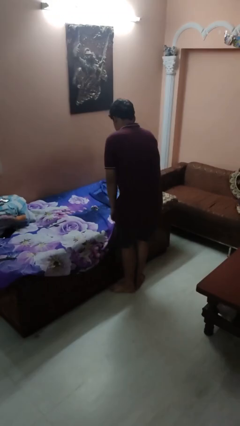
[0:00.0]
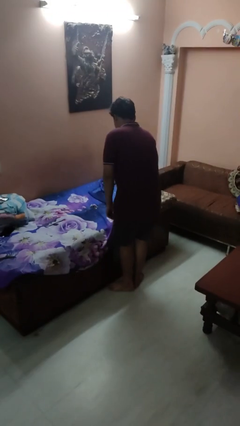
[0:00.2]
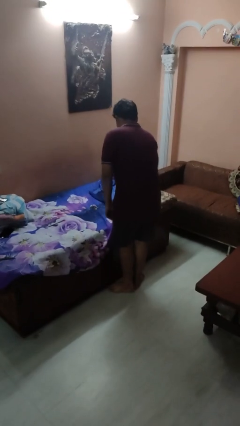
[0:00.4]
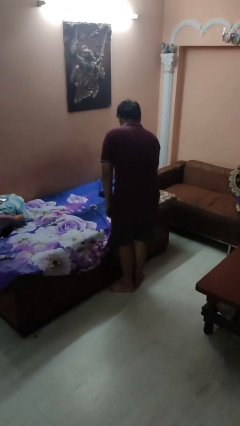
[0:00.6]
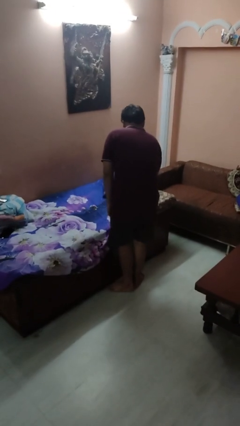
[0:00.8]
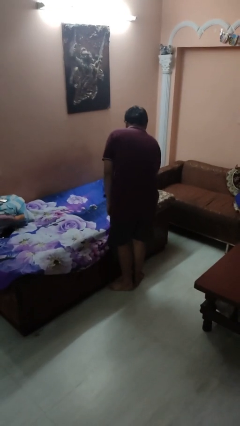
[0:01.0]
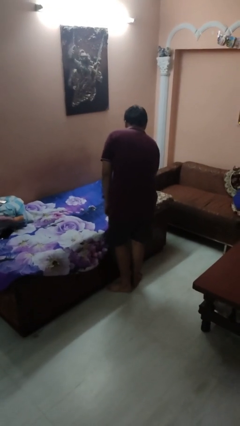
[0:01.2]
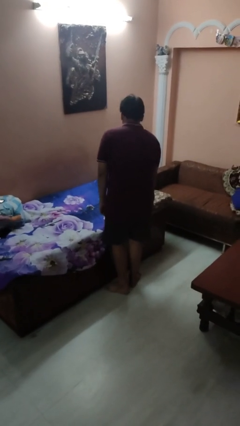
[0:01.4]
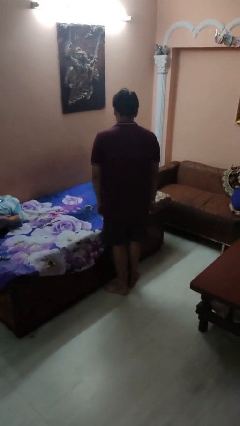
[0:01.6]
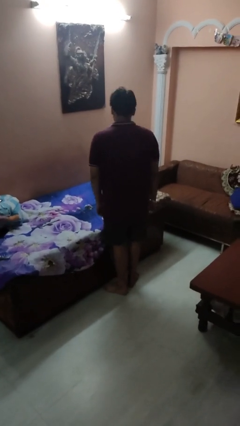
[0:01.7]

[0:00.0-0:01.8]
person makes bed

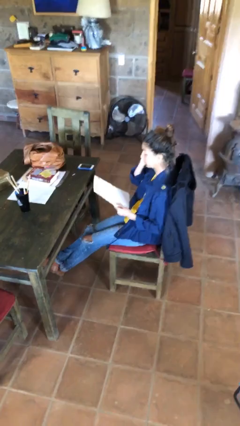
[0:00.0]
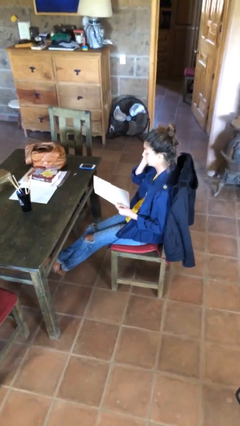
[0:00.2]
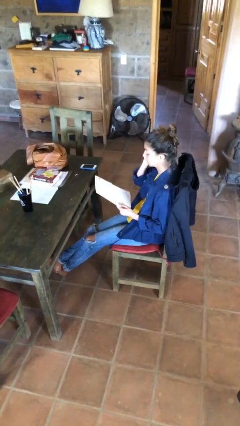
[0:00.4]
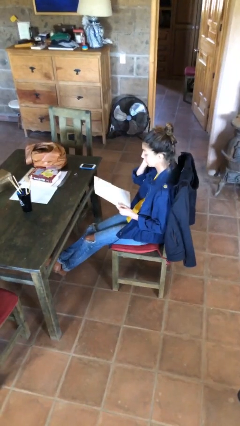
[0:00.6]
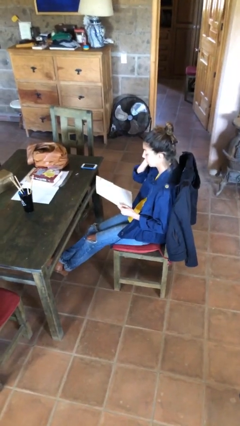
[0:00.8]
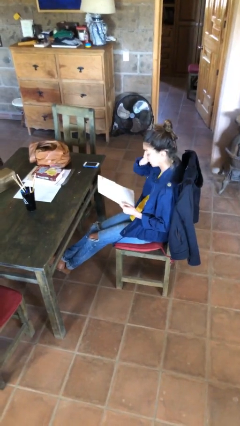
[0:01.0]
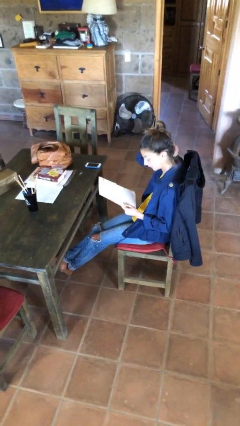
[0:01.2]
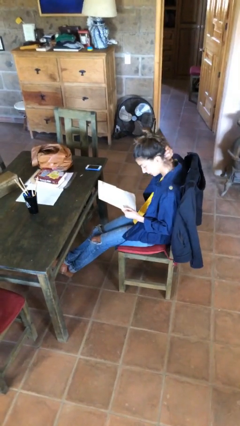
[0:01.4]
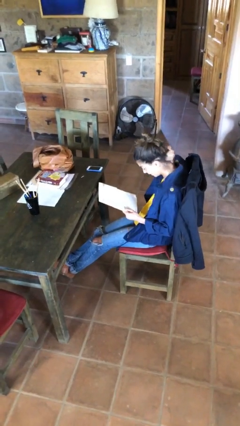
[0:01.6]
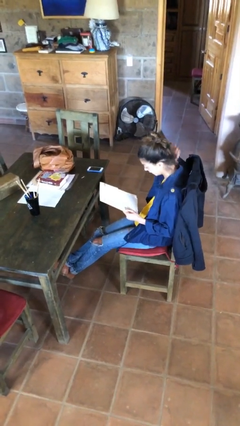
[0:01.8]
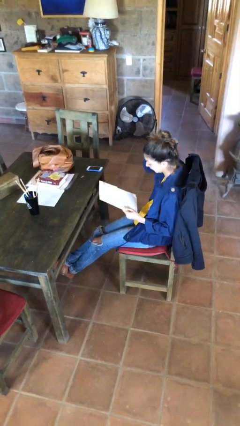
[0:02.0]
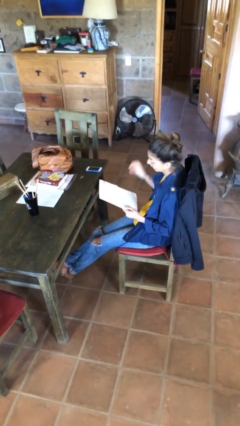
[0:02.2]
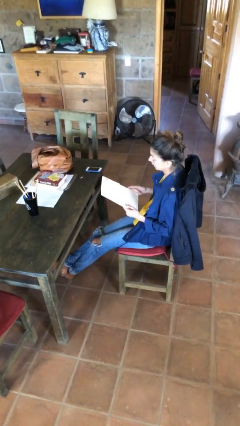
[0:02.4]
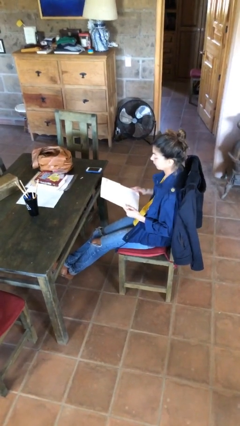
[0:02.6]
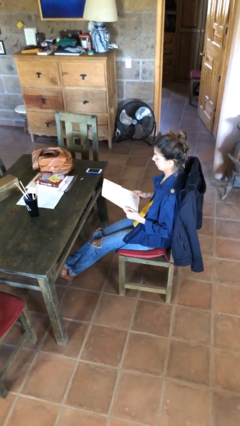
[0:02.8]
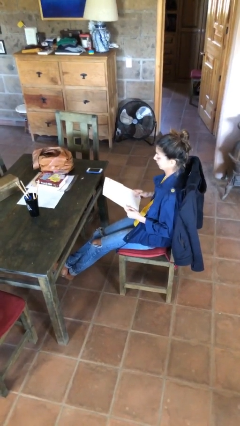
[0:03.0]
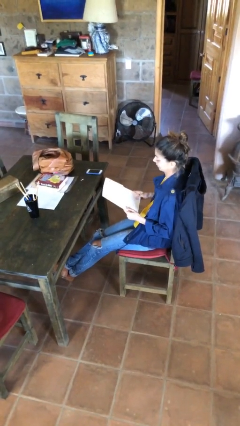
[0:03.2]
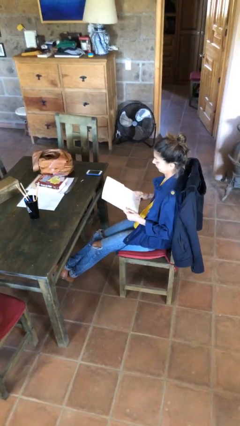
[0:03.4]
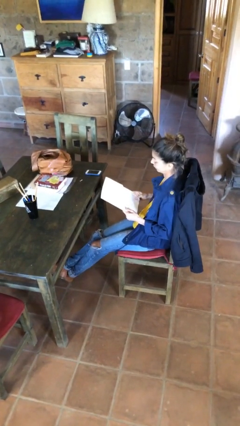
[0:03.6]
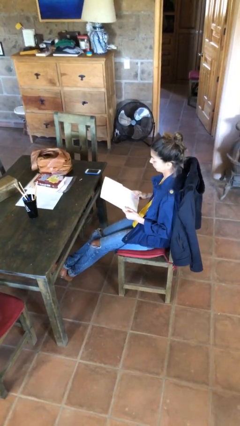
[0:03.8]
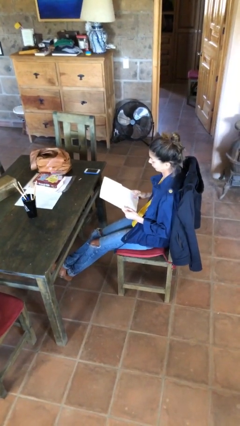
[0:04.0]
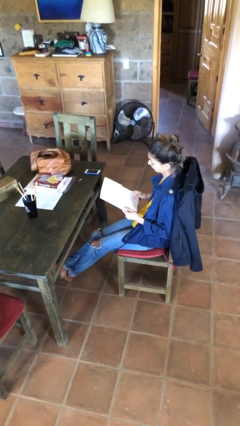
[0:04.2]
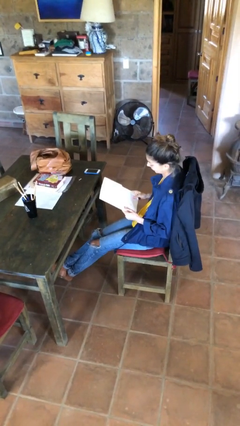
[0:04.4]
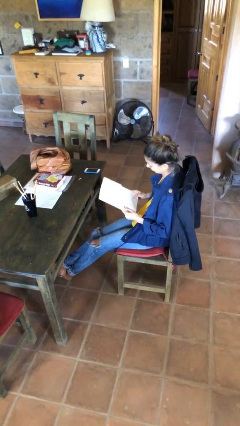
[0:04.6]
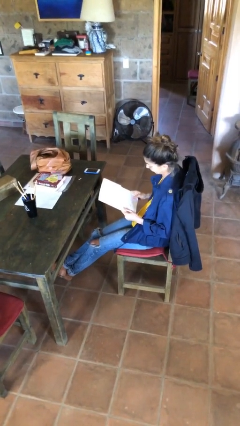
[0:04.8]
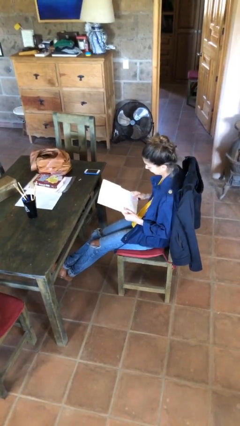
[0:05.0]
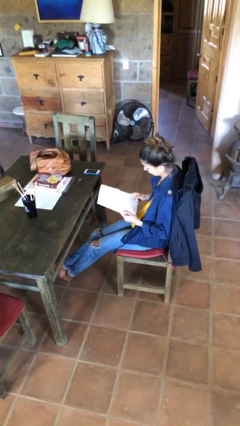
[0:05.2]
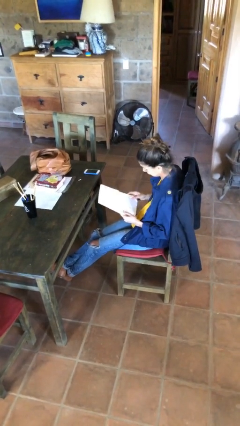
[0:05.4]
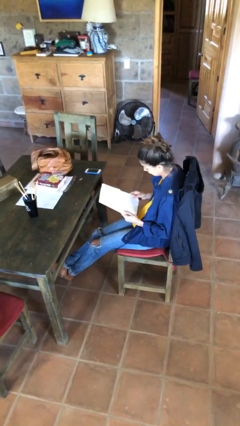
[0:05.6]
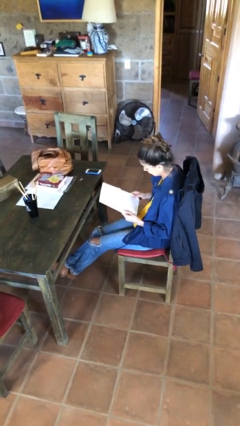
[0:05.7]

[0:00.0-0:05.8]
person reads document

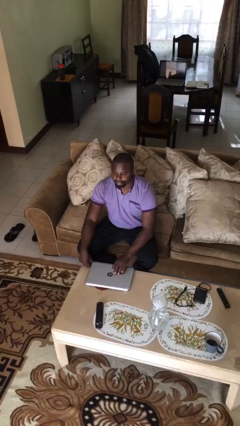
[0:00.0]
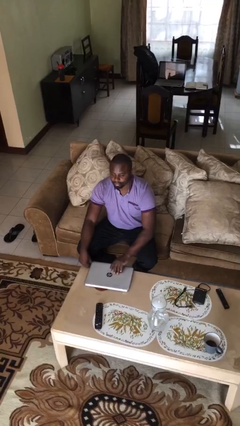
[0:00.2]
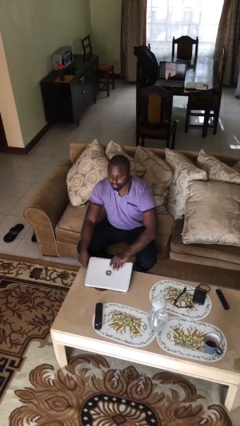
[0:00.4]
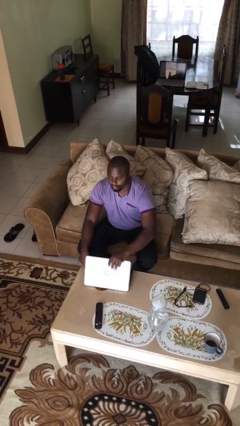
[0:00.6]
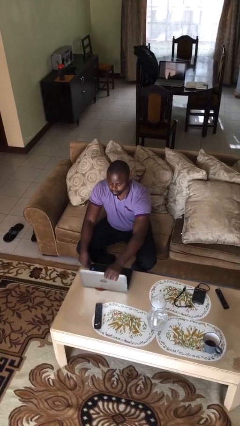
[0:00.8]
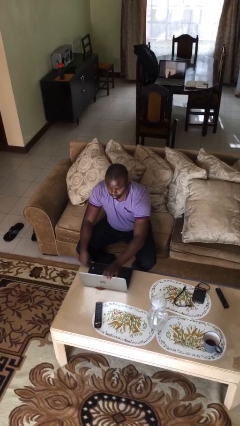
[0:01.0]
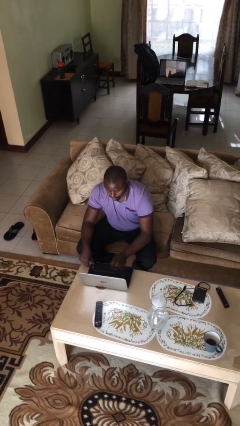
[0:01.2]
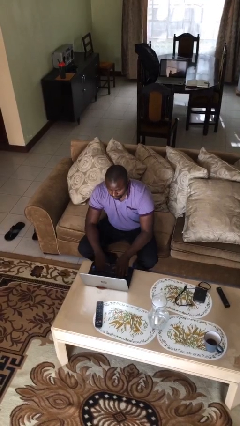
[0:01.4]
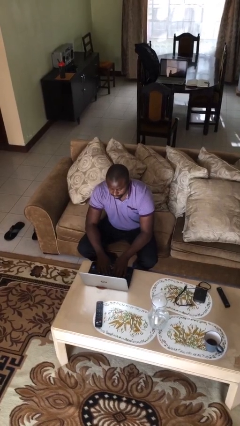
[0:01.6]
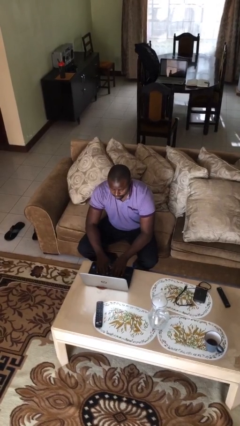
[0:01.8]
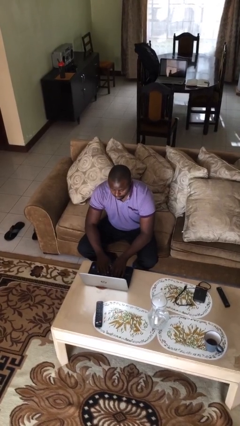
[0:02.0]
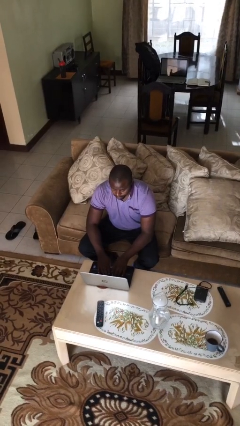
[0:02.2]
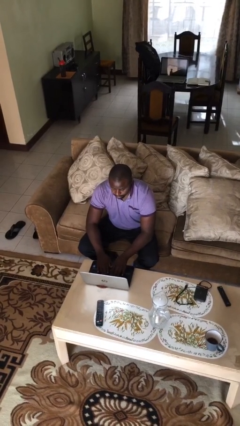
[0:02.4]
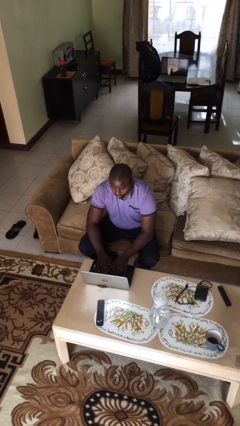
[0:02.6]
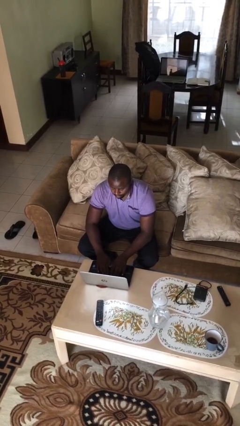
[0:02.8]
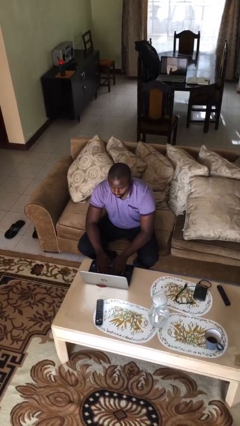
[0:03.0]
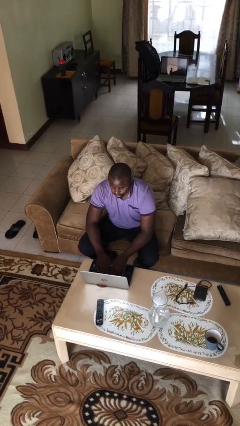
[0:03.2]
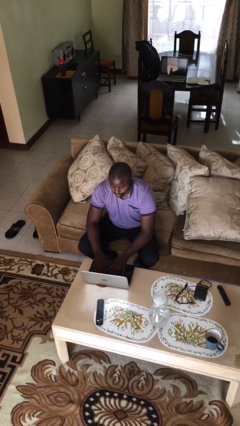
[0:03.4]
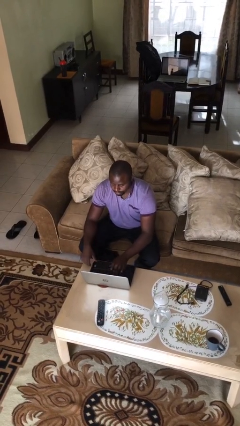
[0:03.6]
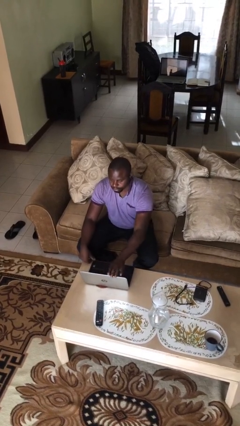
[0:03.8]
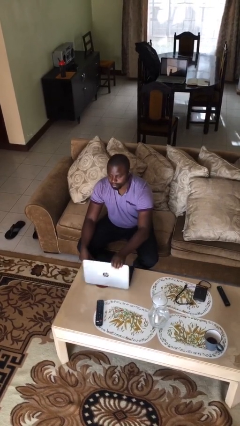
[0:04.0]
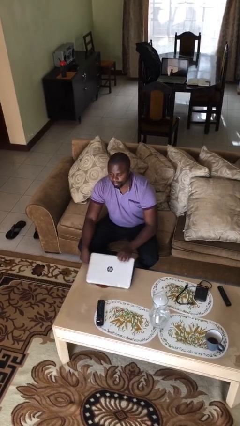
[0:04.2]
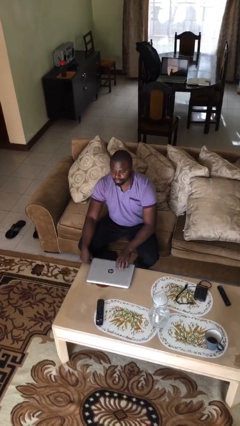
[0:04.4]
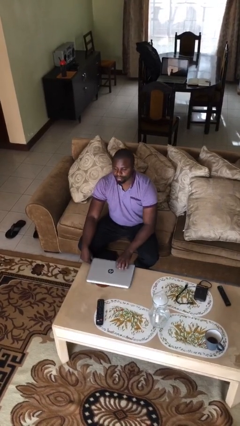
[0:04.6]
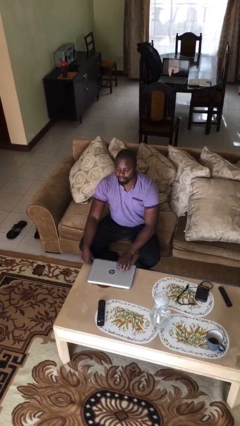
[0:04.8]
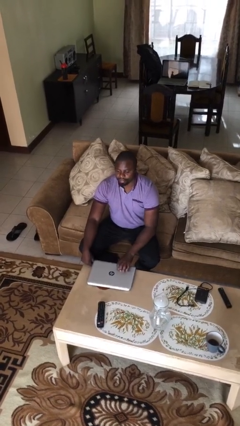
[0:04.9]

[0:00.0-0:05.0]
person interacts with laptop

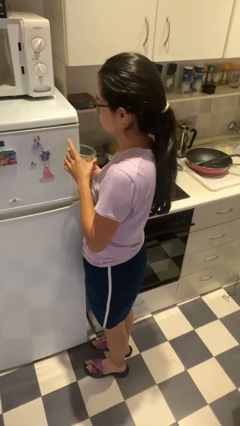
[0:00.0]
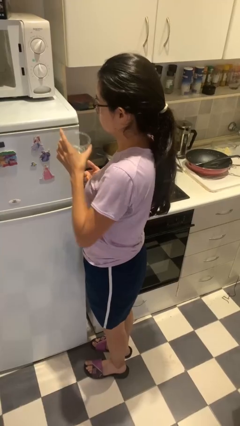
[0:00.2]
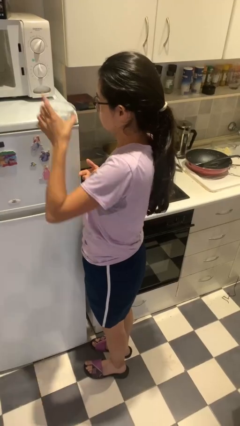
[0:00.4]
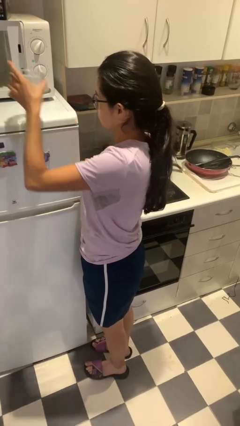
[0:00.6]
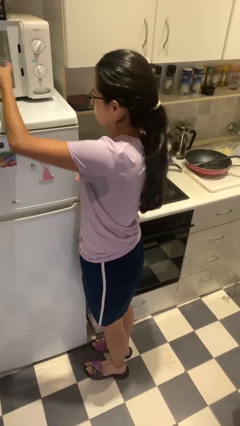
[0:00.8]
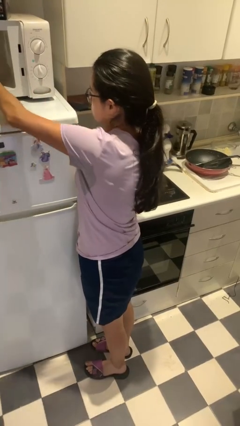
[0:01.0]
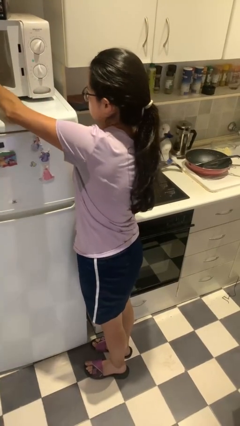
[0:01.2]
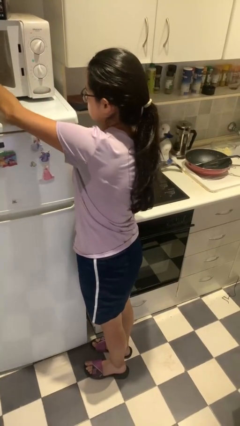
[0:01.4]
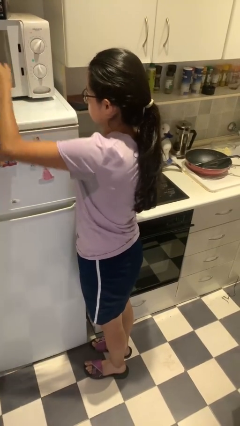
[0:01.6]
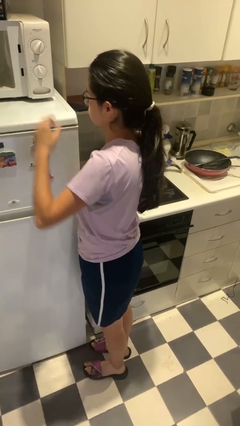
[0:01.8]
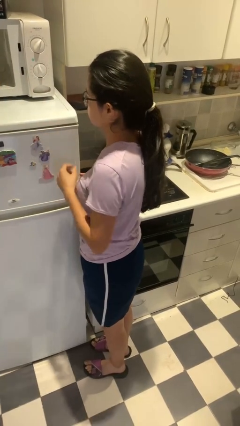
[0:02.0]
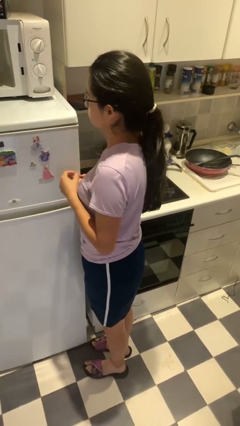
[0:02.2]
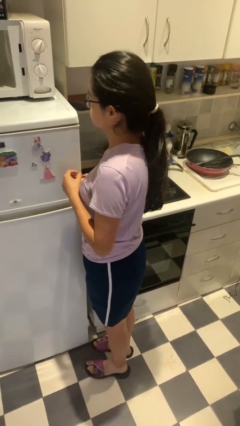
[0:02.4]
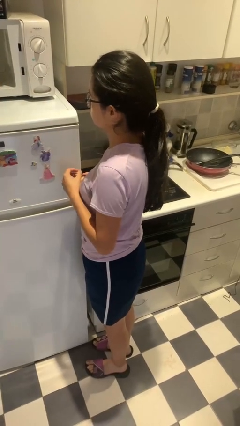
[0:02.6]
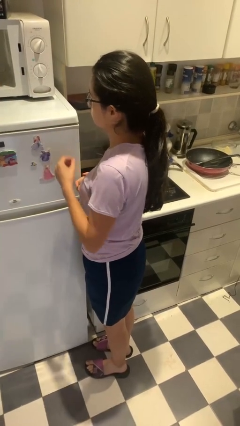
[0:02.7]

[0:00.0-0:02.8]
person puts object into microwave

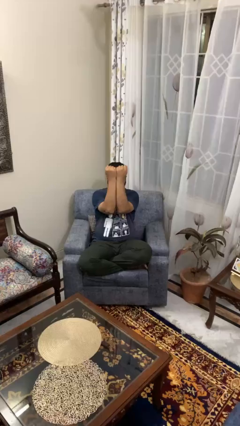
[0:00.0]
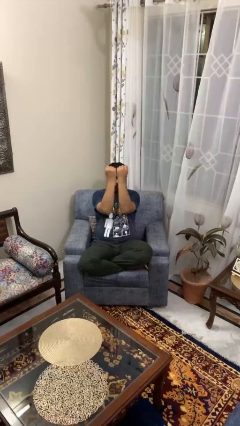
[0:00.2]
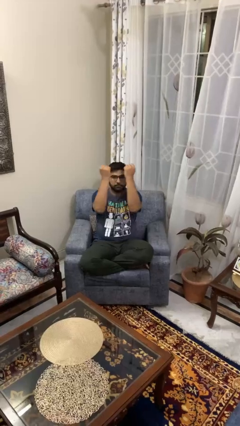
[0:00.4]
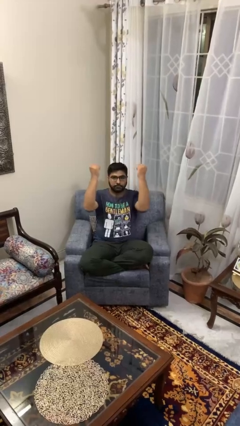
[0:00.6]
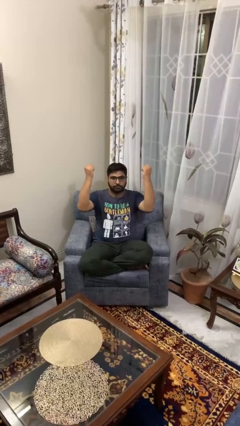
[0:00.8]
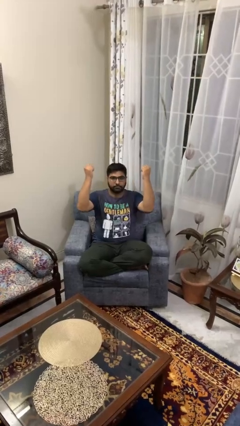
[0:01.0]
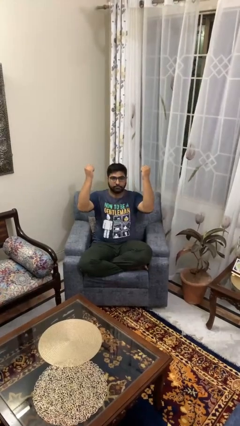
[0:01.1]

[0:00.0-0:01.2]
person gestures zoom out

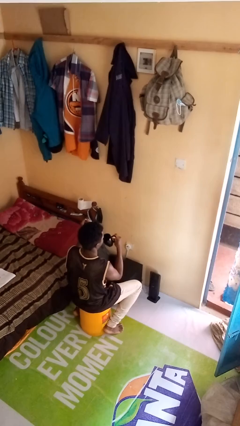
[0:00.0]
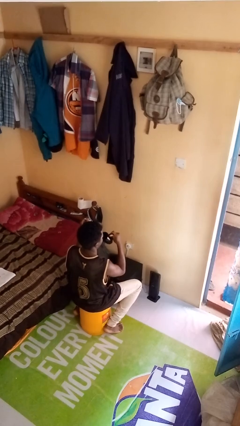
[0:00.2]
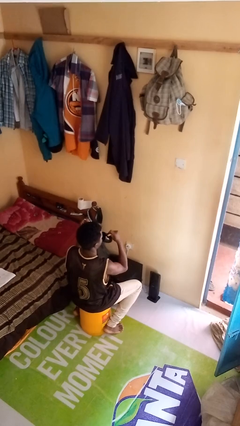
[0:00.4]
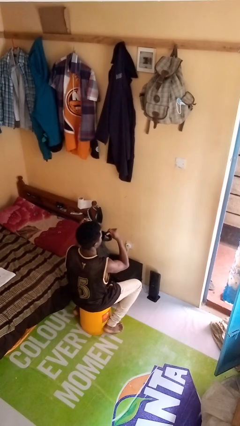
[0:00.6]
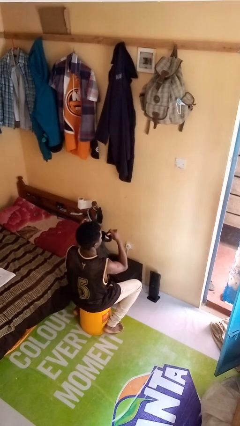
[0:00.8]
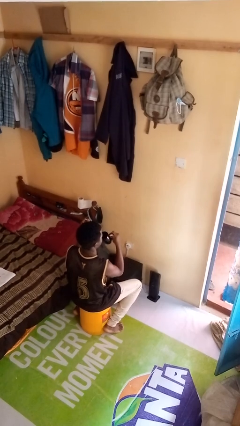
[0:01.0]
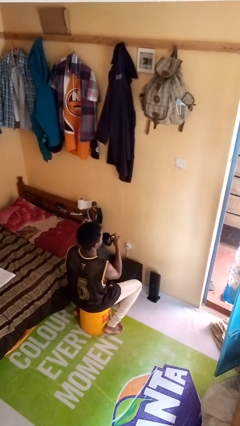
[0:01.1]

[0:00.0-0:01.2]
person drinks from mug
